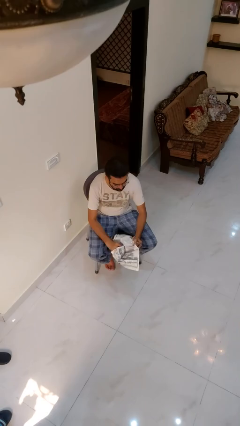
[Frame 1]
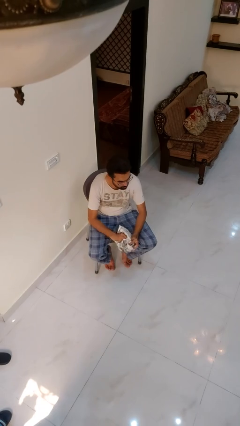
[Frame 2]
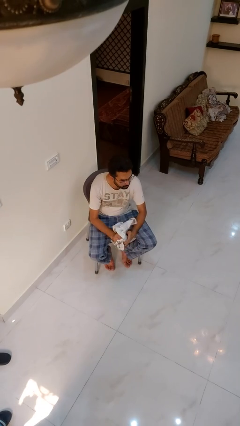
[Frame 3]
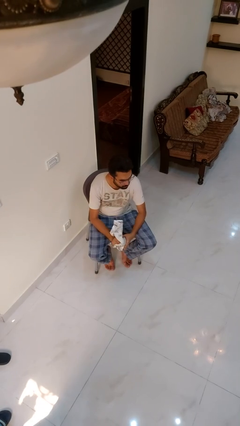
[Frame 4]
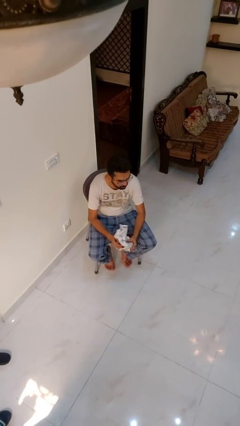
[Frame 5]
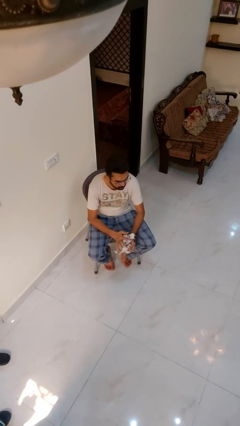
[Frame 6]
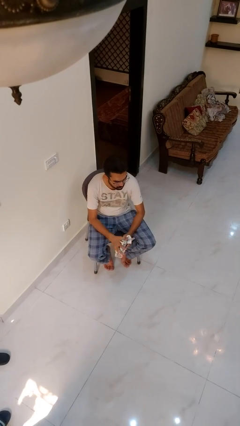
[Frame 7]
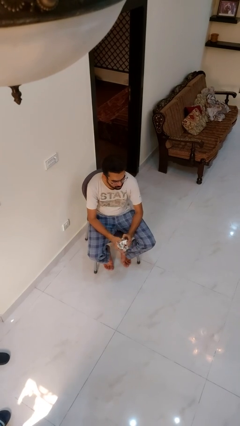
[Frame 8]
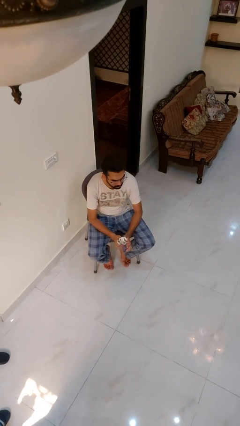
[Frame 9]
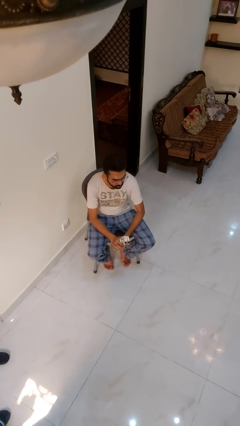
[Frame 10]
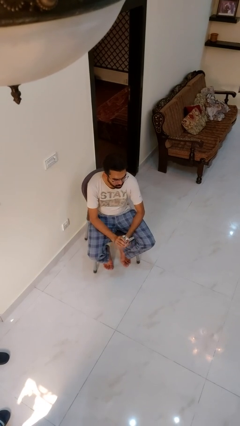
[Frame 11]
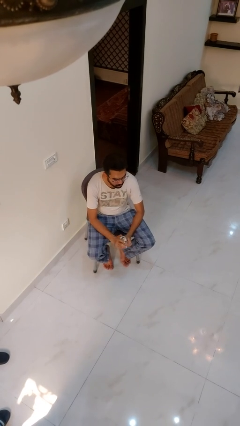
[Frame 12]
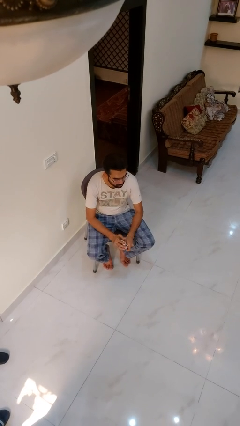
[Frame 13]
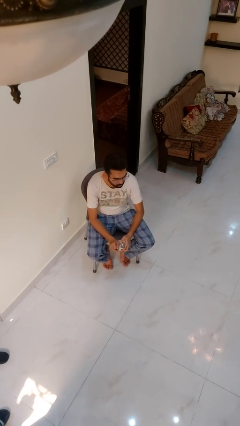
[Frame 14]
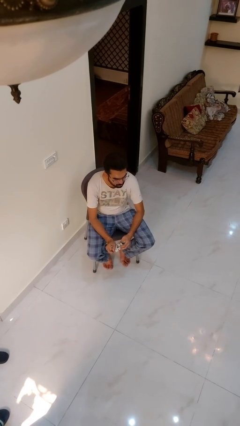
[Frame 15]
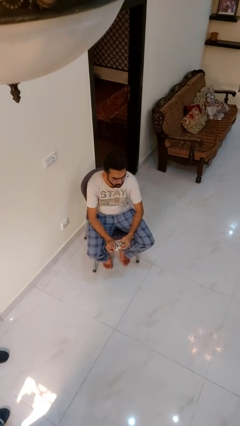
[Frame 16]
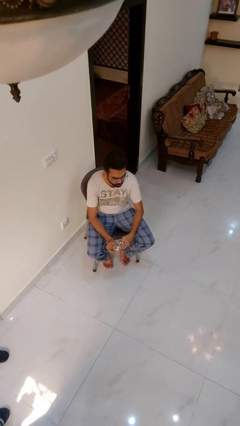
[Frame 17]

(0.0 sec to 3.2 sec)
person crumples paper

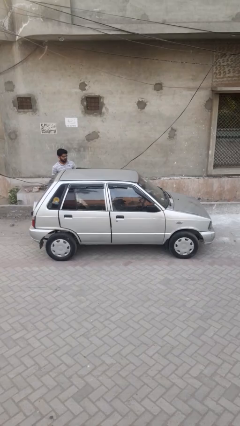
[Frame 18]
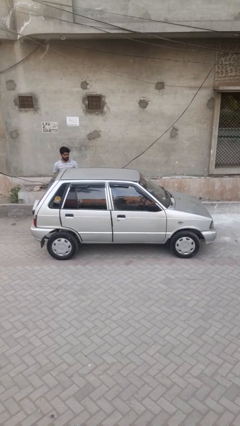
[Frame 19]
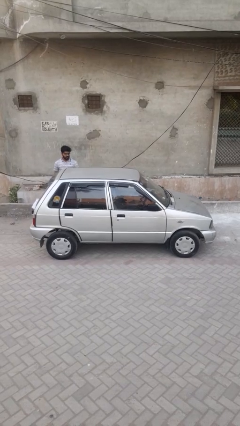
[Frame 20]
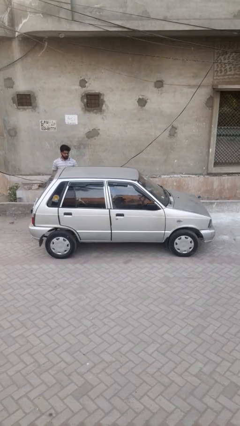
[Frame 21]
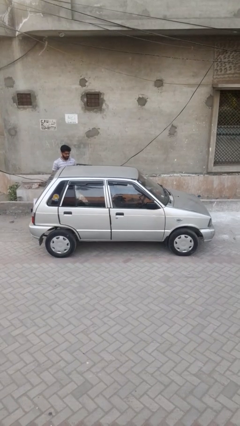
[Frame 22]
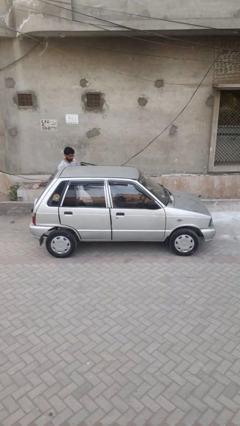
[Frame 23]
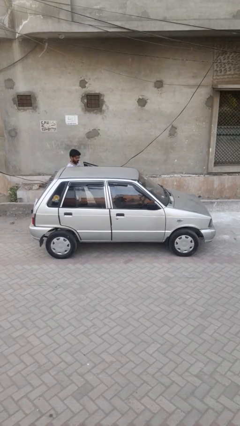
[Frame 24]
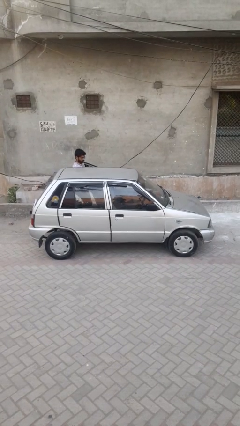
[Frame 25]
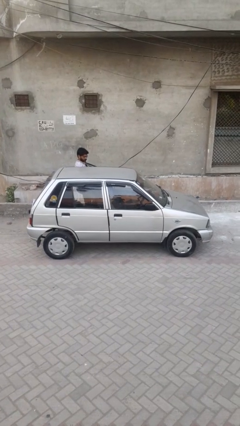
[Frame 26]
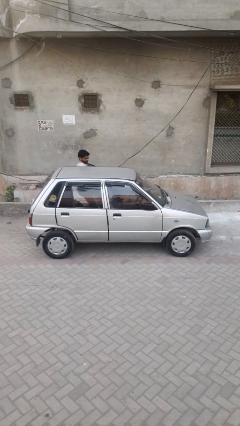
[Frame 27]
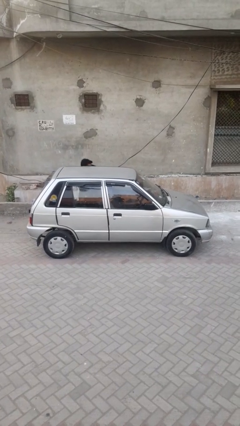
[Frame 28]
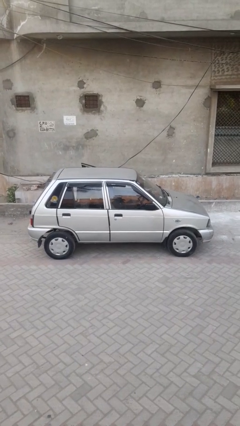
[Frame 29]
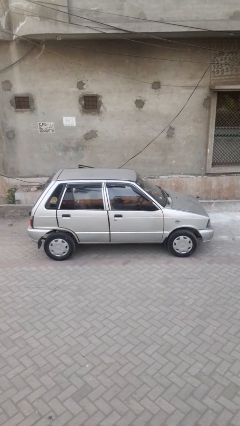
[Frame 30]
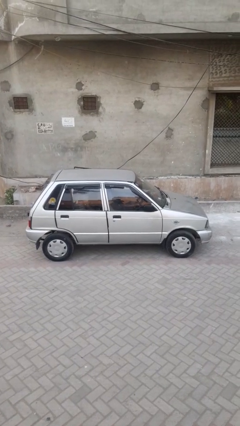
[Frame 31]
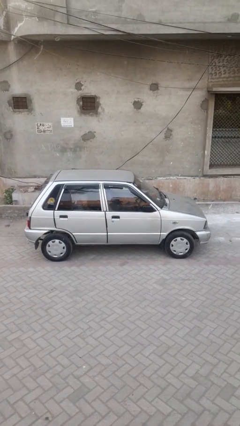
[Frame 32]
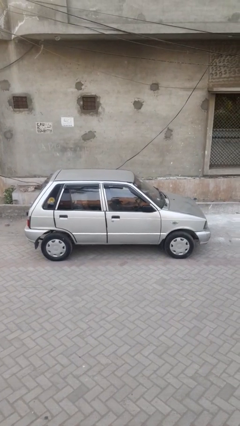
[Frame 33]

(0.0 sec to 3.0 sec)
car picks up person

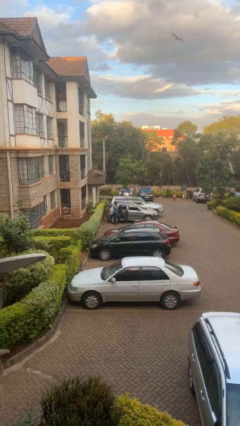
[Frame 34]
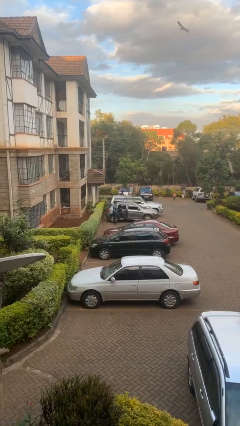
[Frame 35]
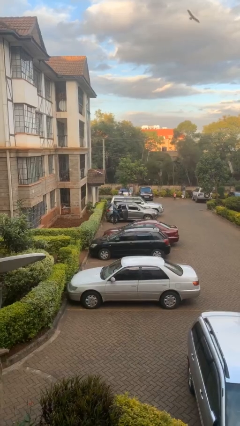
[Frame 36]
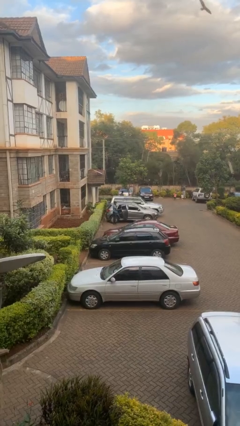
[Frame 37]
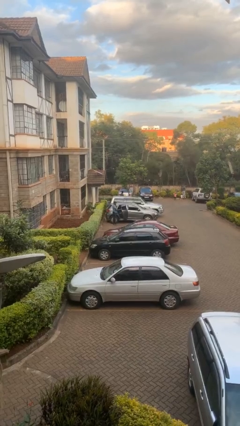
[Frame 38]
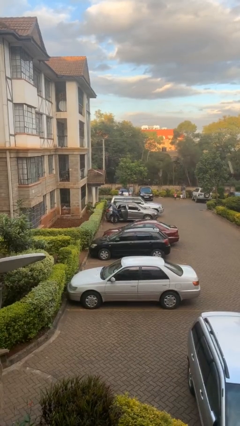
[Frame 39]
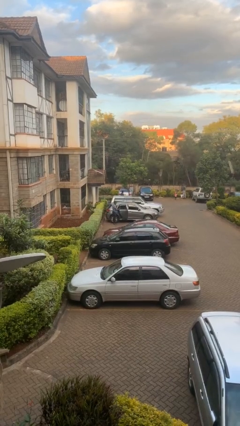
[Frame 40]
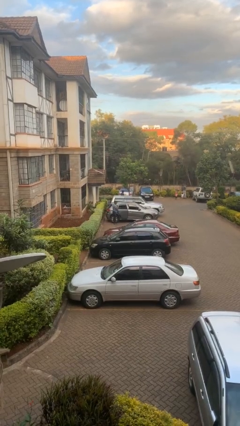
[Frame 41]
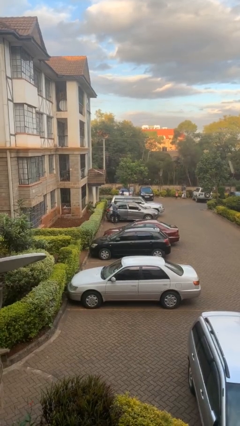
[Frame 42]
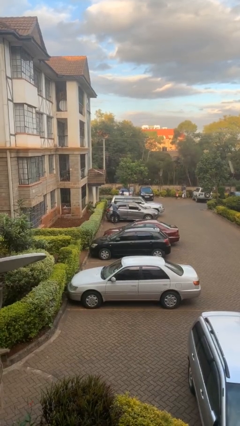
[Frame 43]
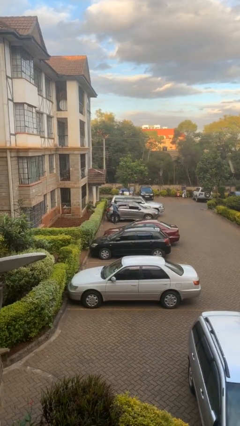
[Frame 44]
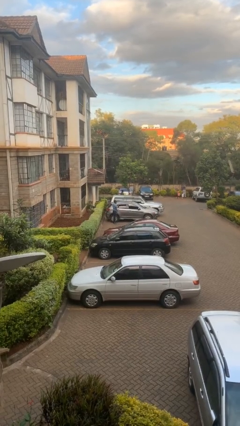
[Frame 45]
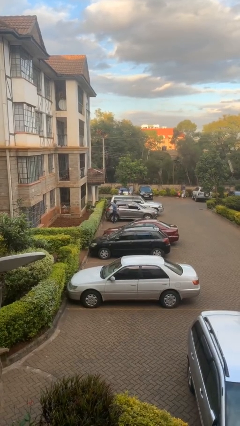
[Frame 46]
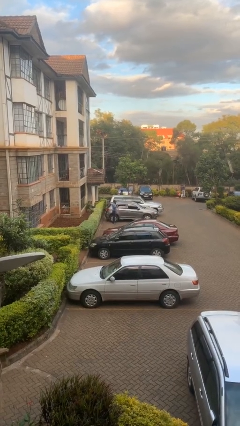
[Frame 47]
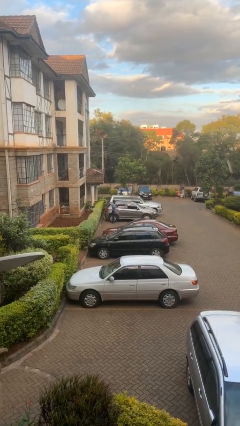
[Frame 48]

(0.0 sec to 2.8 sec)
person closes car door

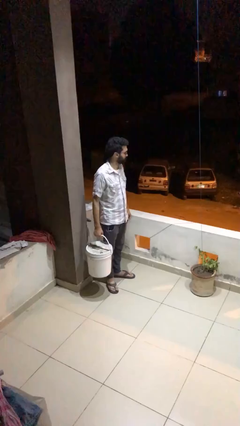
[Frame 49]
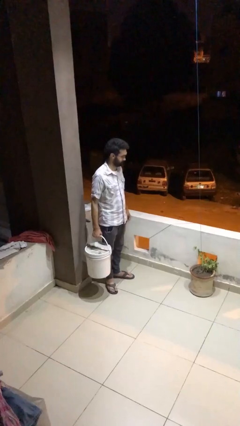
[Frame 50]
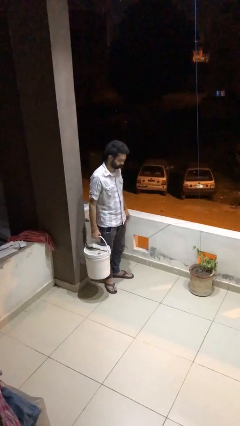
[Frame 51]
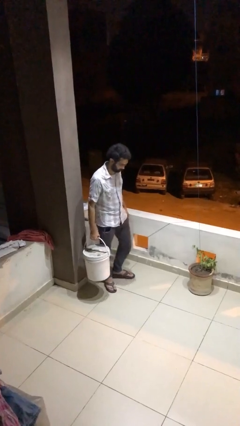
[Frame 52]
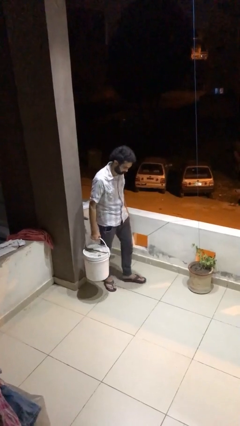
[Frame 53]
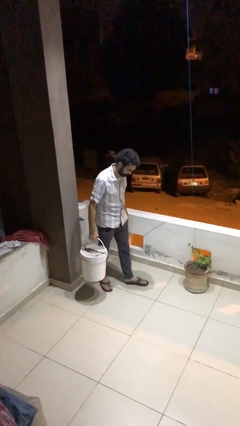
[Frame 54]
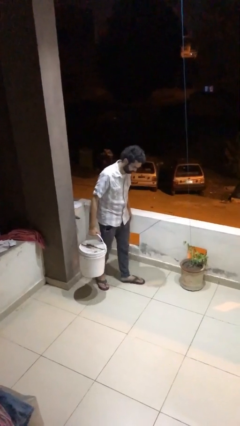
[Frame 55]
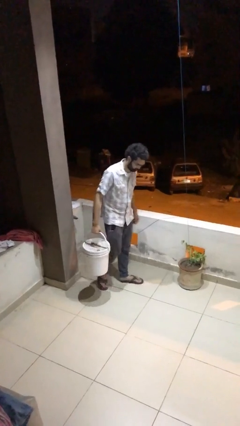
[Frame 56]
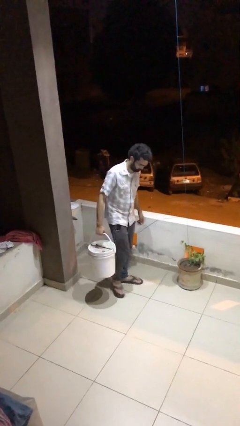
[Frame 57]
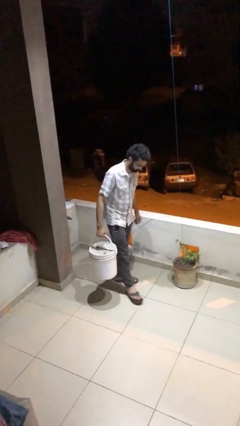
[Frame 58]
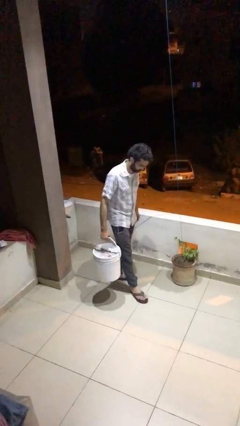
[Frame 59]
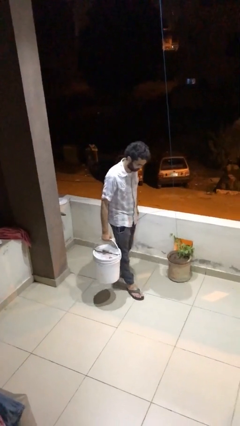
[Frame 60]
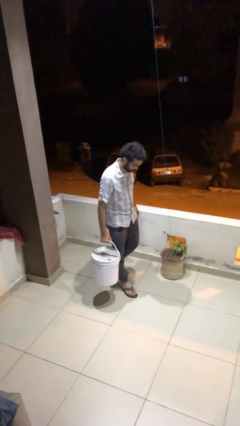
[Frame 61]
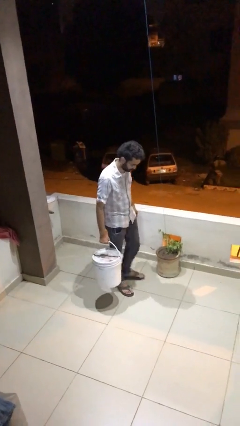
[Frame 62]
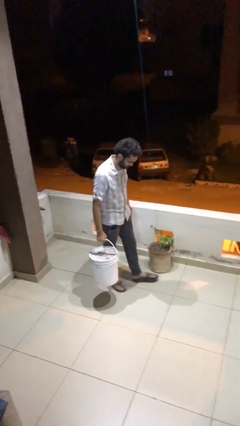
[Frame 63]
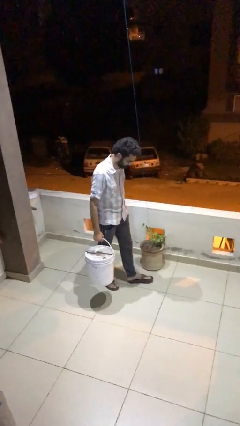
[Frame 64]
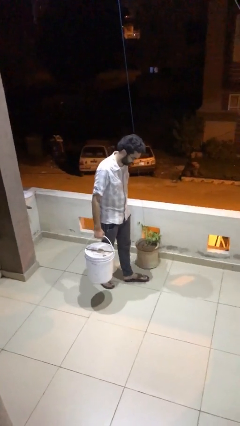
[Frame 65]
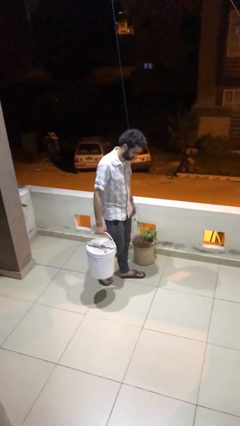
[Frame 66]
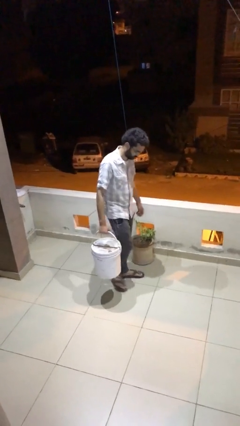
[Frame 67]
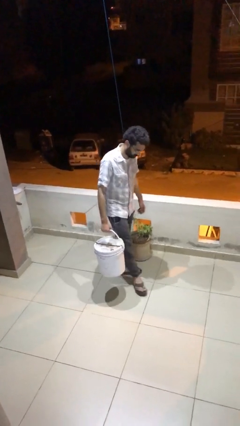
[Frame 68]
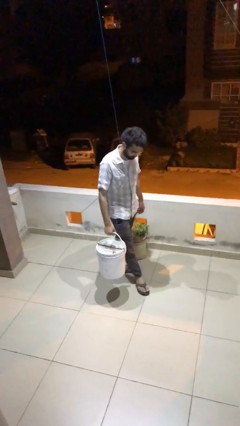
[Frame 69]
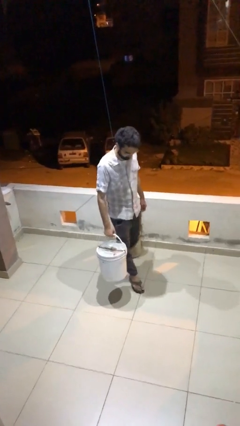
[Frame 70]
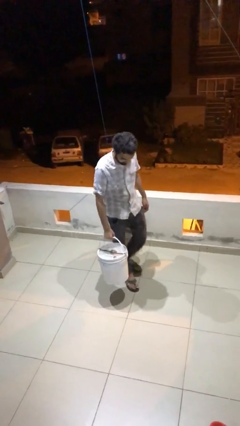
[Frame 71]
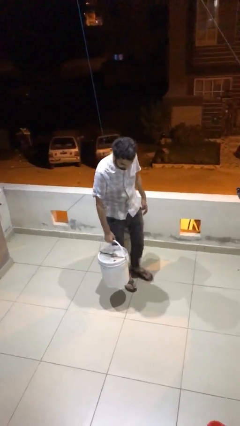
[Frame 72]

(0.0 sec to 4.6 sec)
person carries heavy object

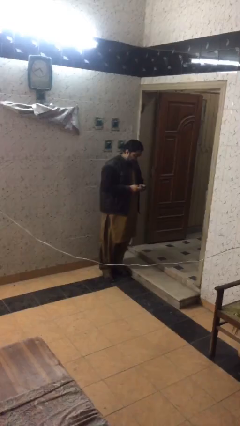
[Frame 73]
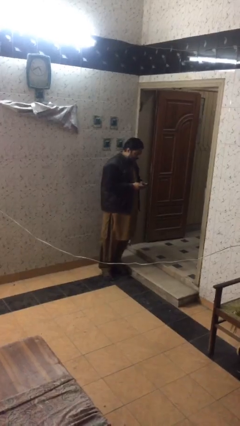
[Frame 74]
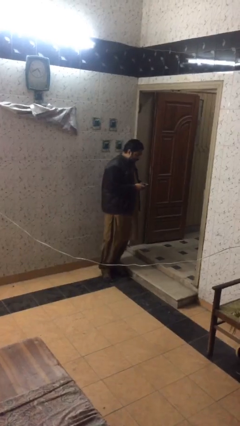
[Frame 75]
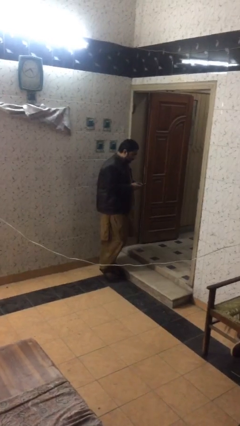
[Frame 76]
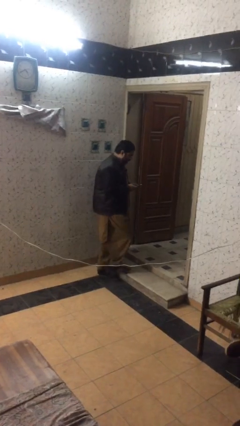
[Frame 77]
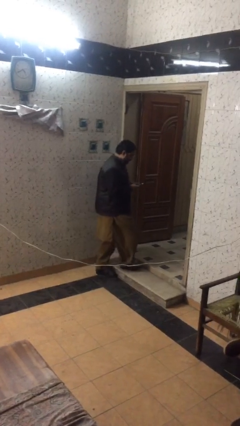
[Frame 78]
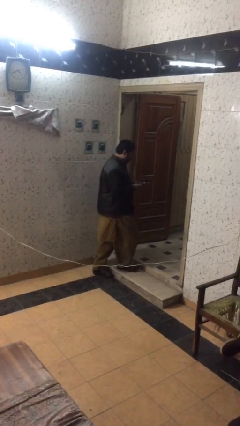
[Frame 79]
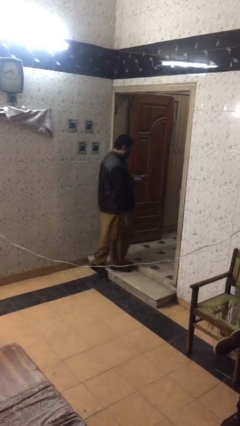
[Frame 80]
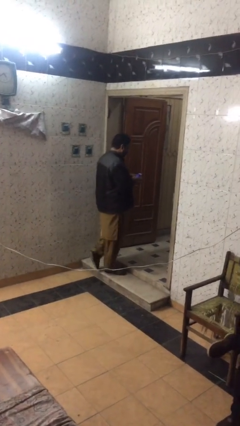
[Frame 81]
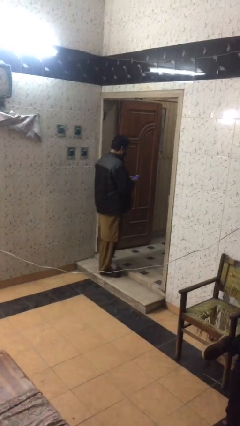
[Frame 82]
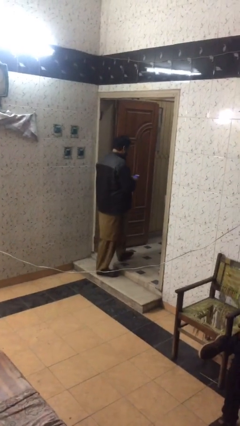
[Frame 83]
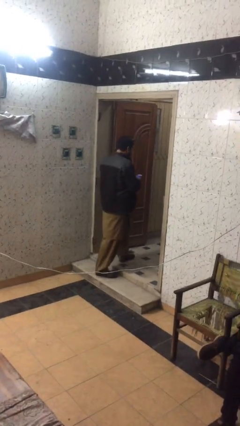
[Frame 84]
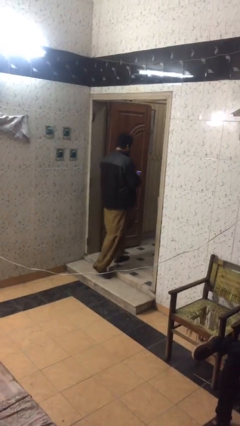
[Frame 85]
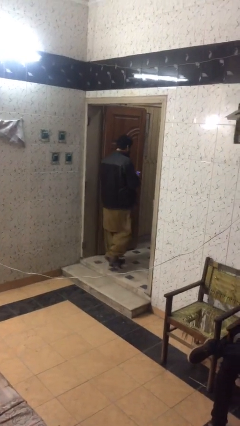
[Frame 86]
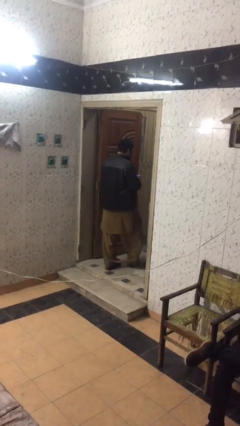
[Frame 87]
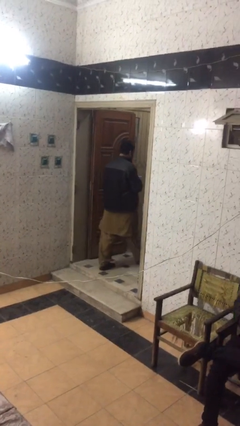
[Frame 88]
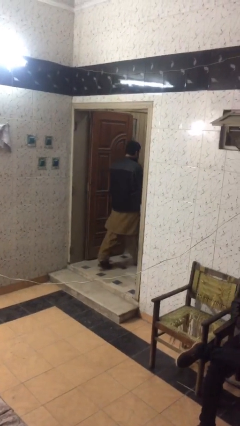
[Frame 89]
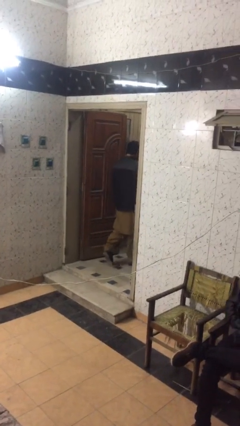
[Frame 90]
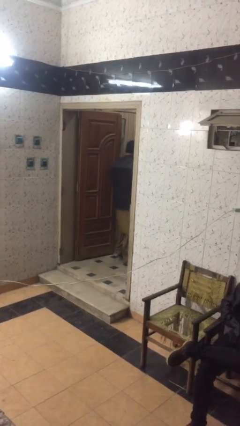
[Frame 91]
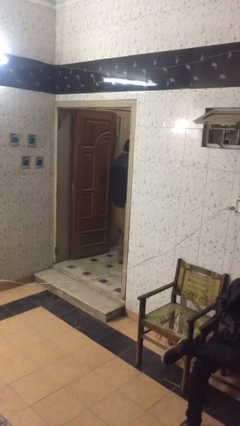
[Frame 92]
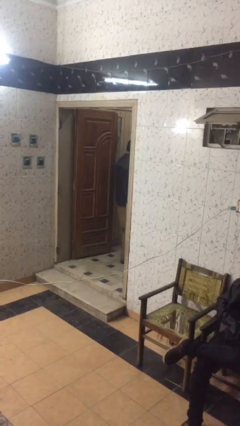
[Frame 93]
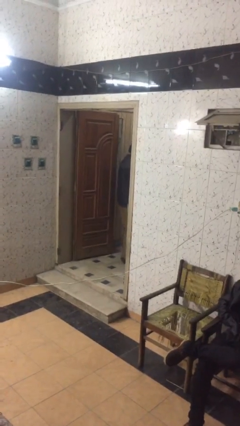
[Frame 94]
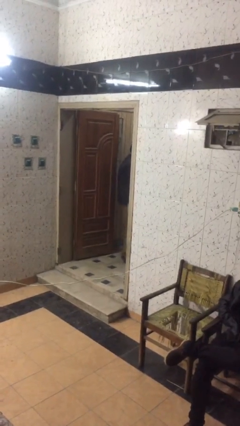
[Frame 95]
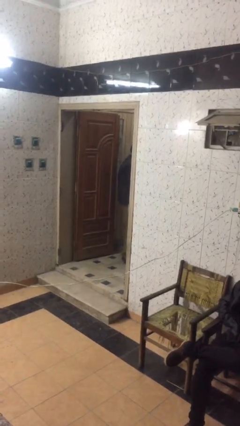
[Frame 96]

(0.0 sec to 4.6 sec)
person exits scene through structure
